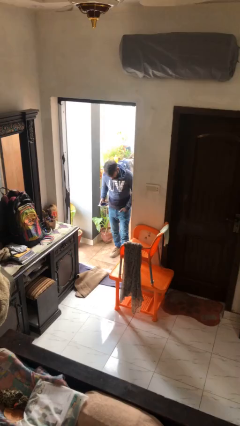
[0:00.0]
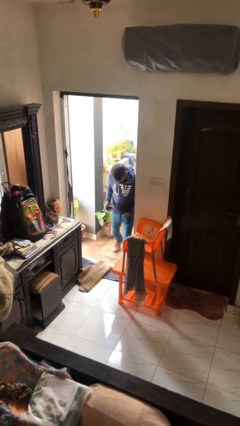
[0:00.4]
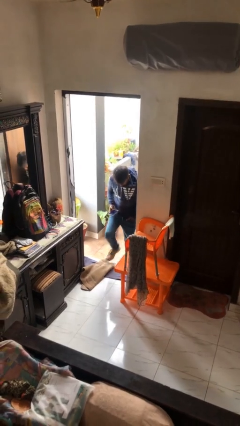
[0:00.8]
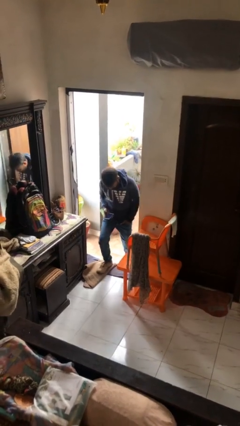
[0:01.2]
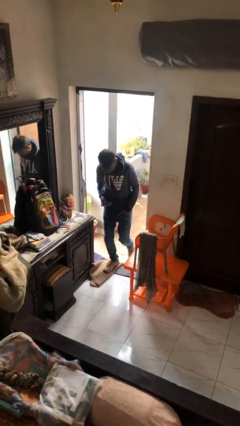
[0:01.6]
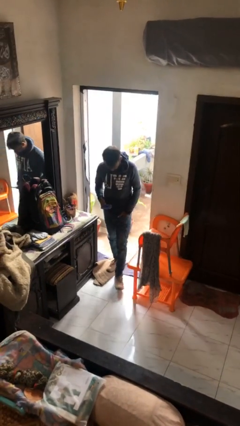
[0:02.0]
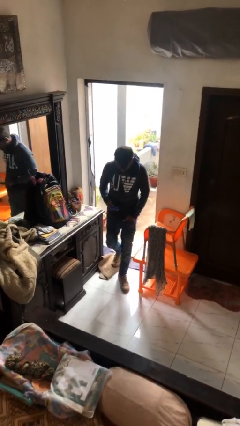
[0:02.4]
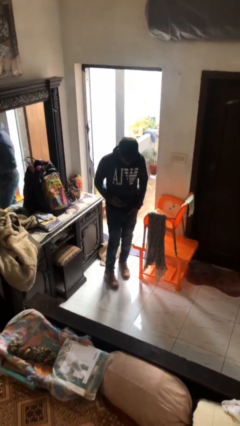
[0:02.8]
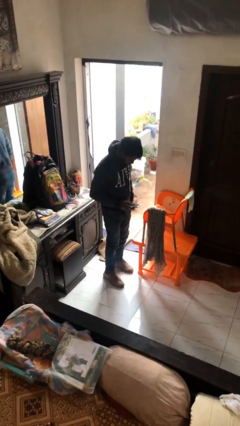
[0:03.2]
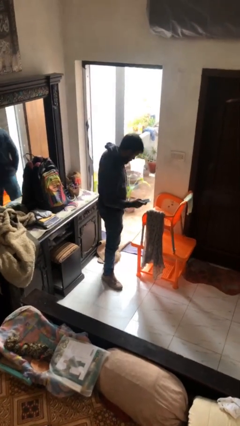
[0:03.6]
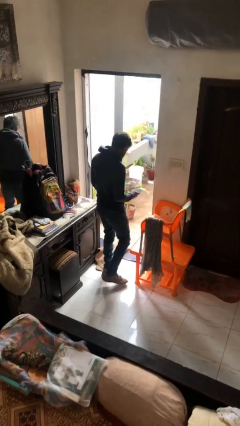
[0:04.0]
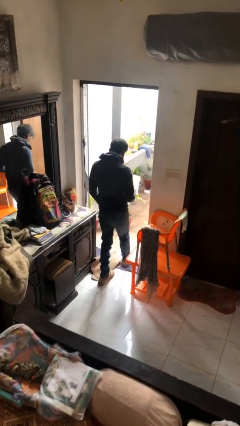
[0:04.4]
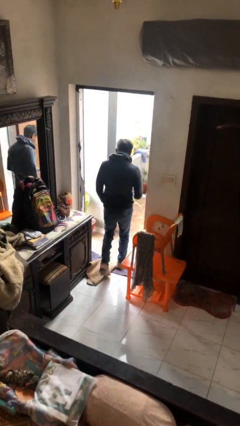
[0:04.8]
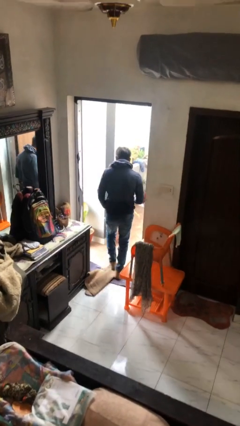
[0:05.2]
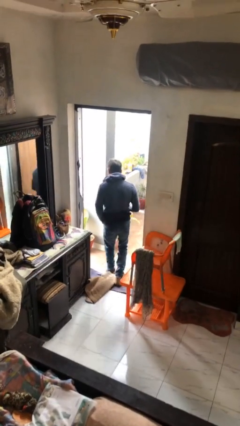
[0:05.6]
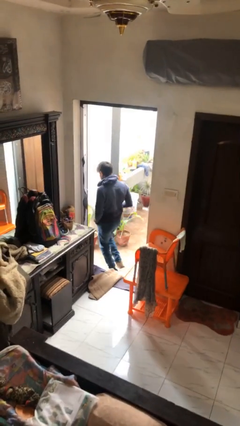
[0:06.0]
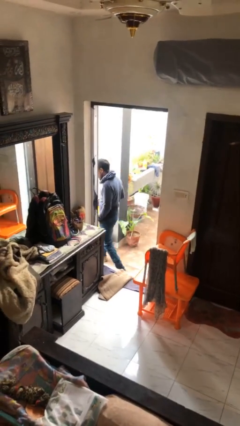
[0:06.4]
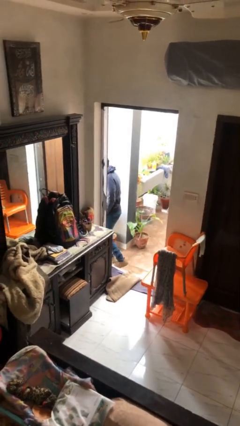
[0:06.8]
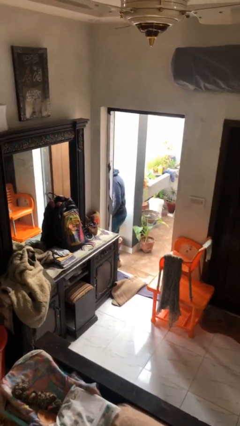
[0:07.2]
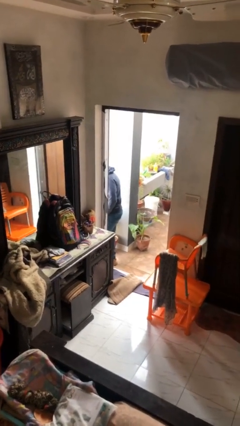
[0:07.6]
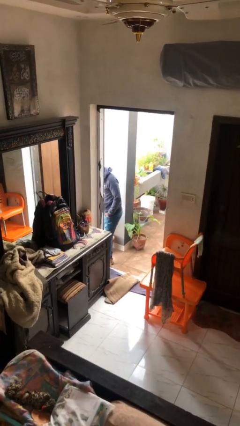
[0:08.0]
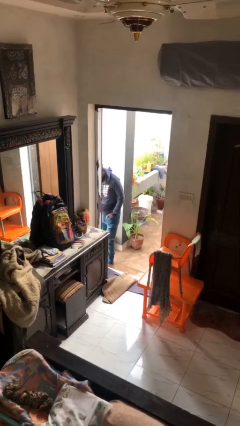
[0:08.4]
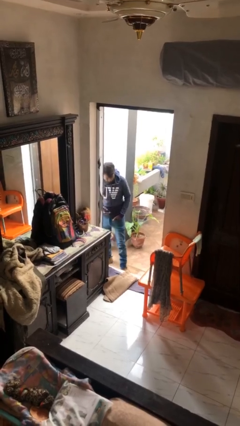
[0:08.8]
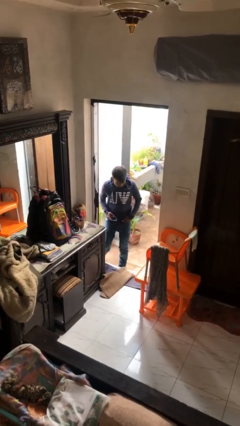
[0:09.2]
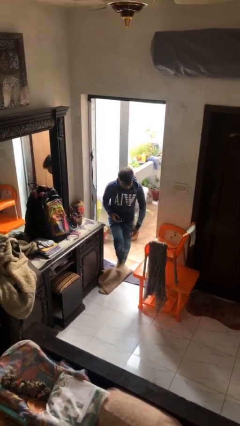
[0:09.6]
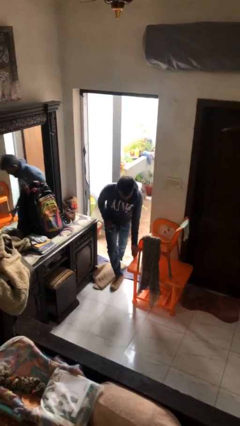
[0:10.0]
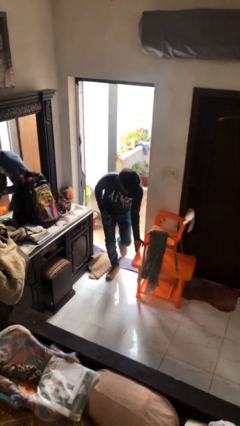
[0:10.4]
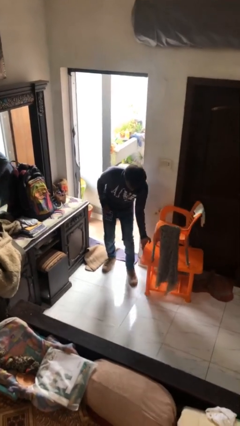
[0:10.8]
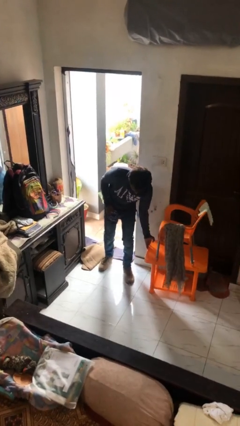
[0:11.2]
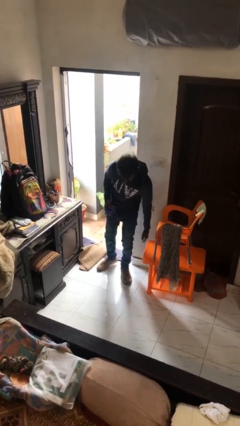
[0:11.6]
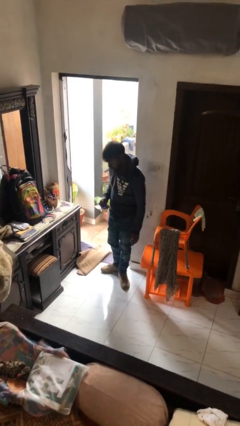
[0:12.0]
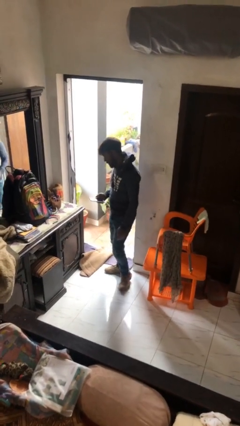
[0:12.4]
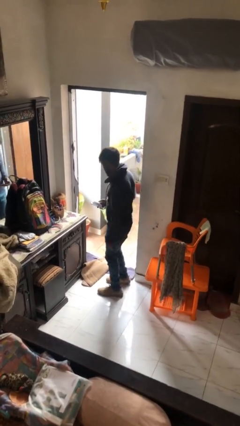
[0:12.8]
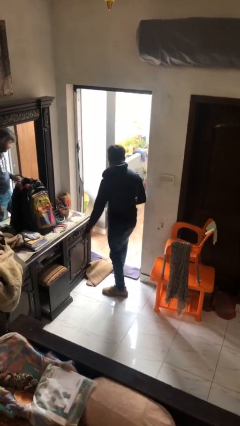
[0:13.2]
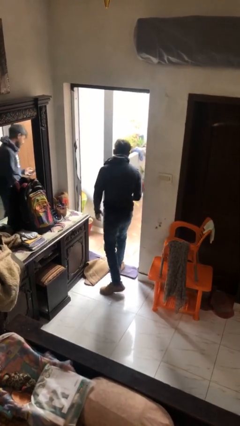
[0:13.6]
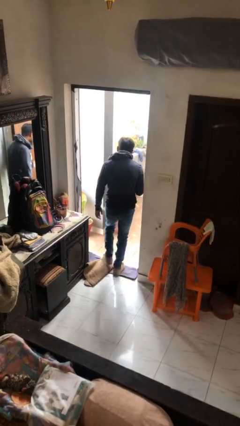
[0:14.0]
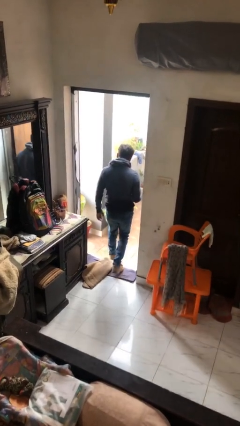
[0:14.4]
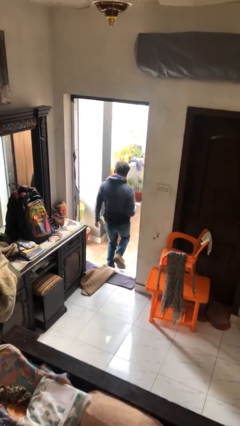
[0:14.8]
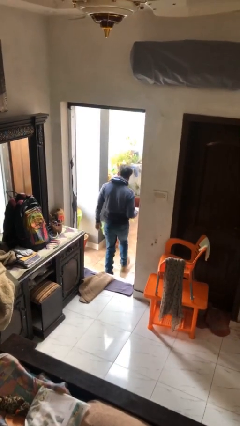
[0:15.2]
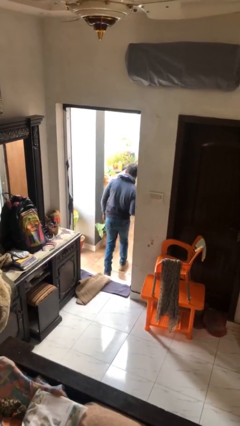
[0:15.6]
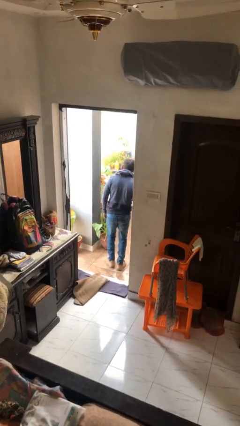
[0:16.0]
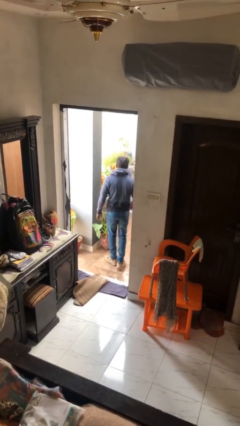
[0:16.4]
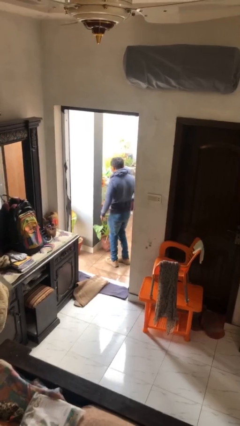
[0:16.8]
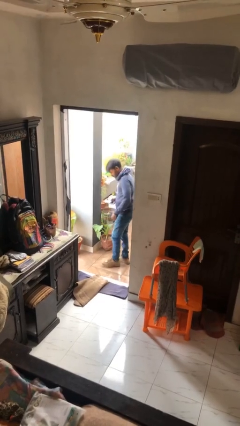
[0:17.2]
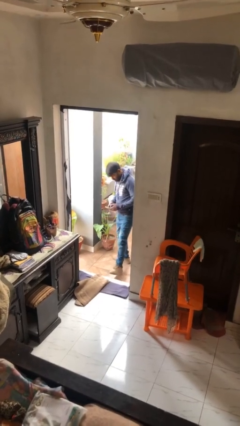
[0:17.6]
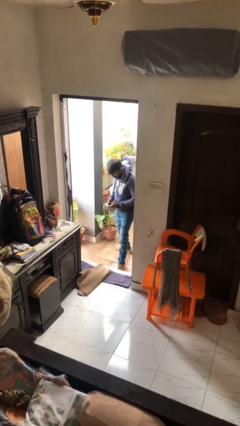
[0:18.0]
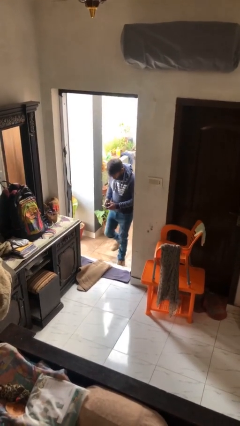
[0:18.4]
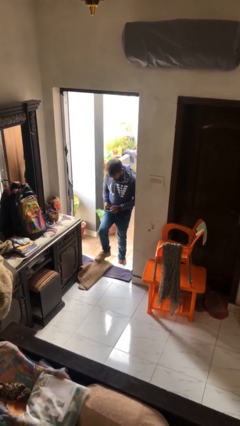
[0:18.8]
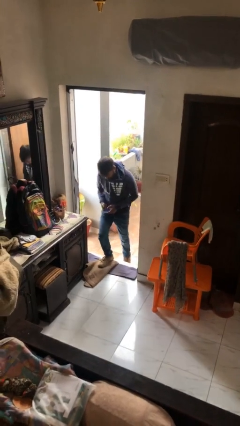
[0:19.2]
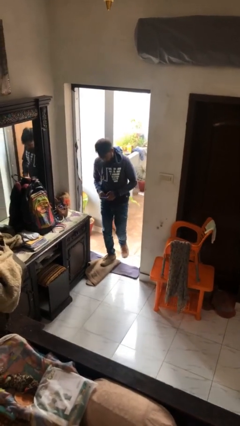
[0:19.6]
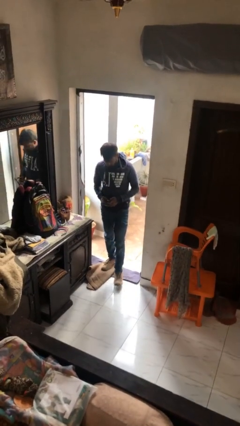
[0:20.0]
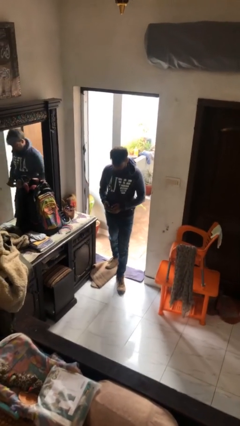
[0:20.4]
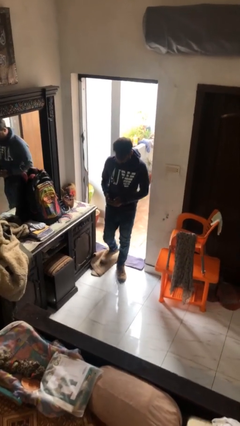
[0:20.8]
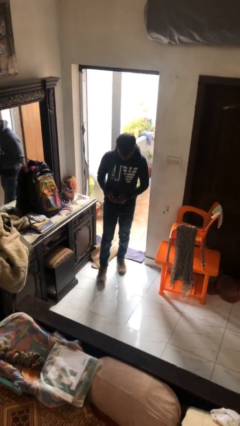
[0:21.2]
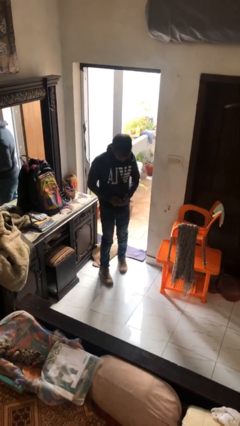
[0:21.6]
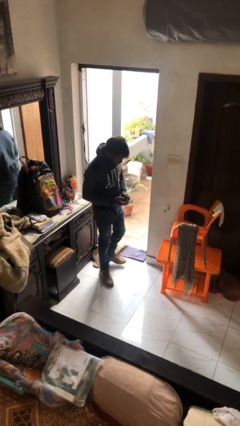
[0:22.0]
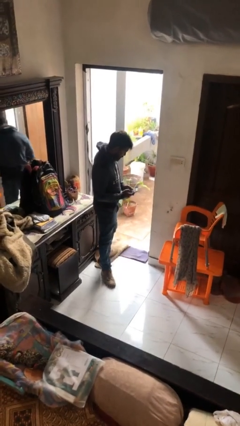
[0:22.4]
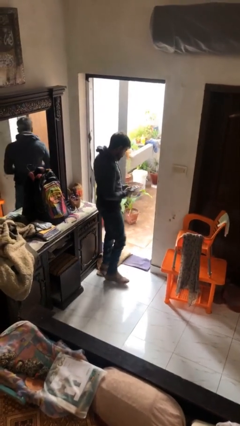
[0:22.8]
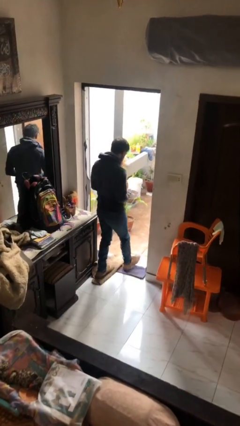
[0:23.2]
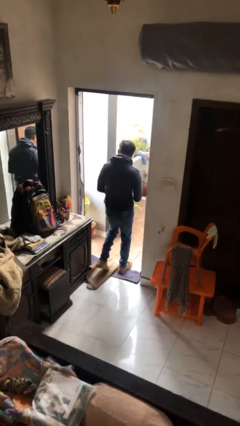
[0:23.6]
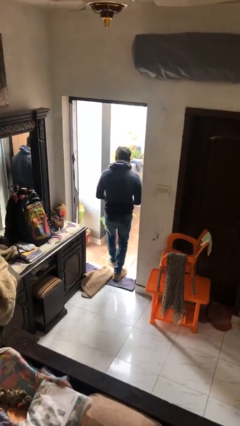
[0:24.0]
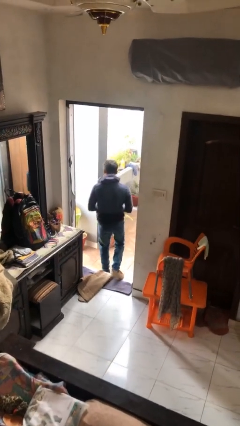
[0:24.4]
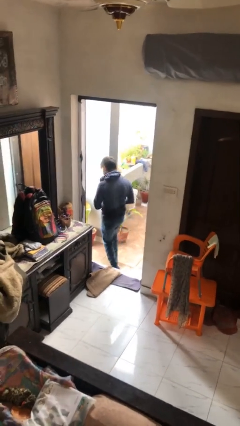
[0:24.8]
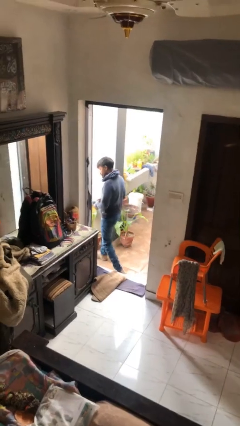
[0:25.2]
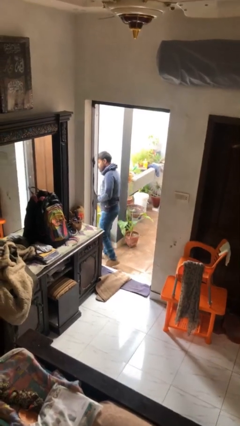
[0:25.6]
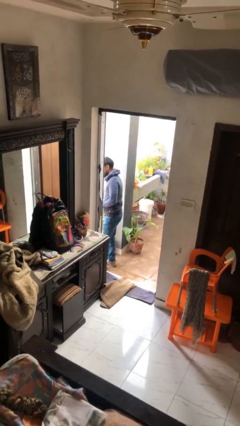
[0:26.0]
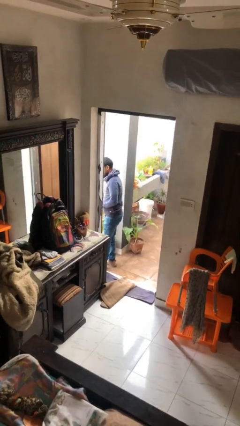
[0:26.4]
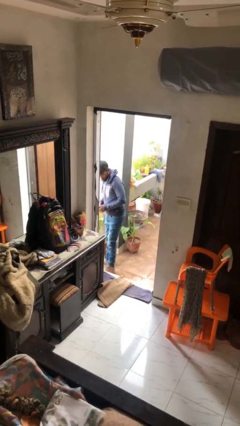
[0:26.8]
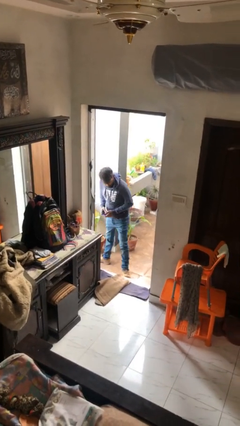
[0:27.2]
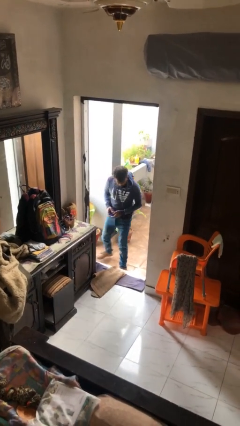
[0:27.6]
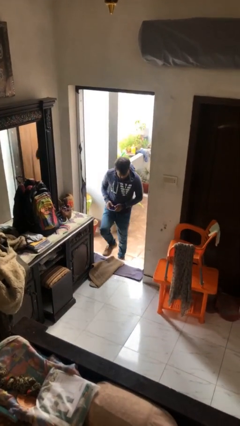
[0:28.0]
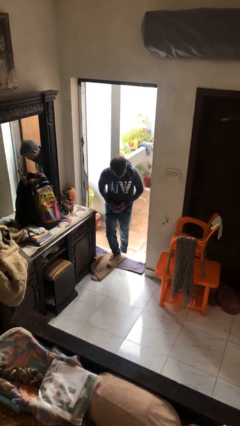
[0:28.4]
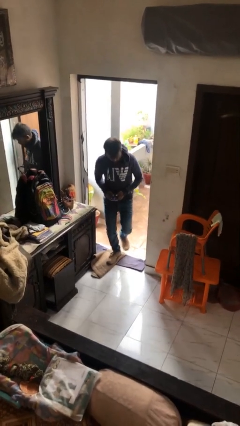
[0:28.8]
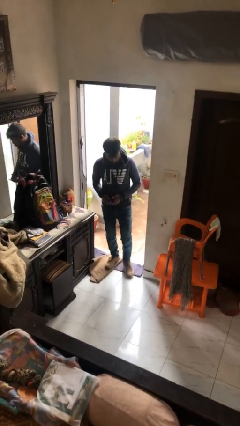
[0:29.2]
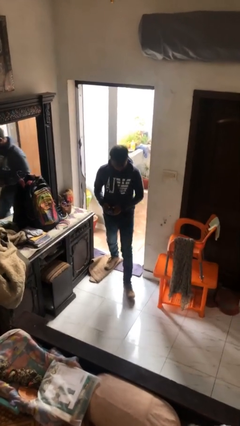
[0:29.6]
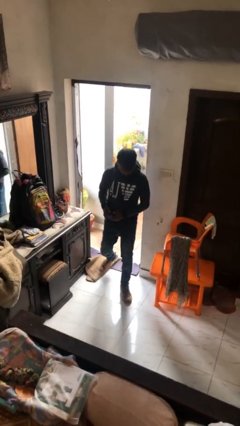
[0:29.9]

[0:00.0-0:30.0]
person texts on phone

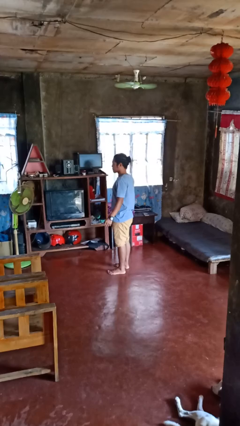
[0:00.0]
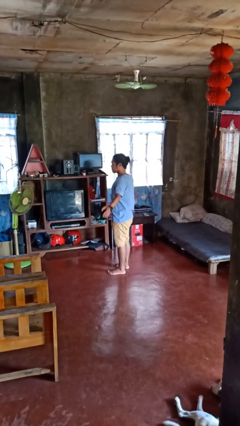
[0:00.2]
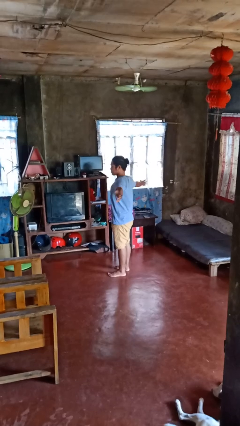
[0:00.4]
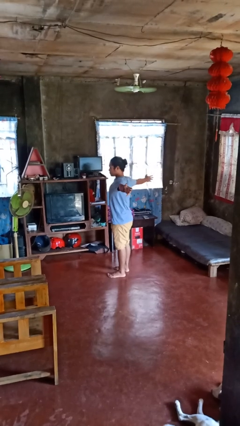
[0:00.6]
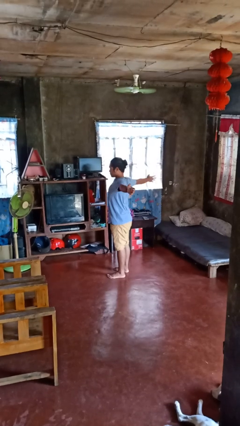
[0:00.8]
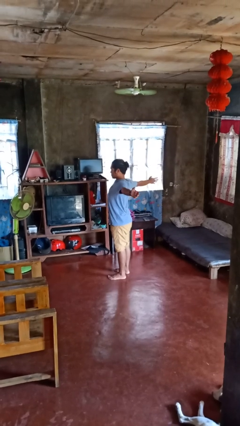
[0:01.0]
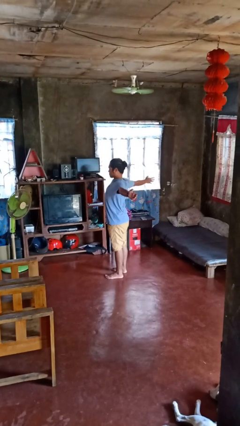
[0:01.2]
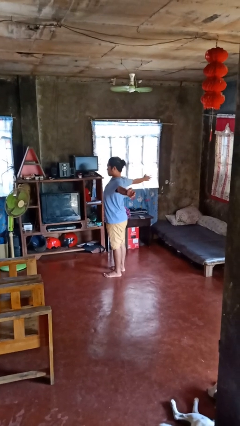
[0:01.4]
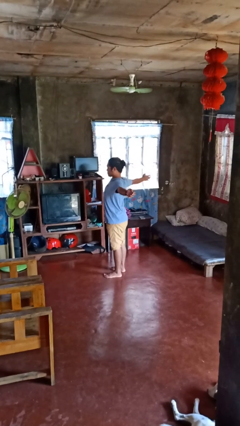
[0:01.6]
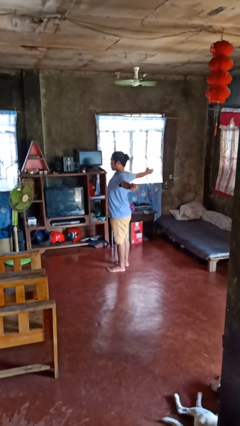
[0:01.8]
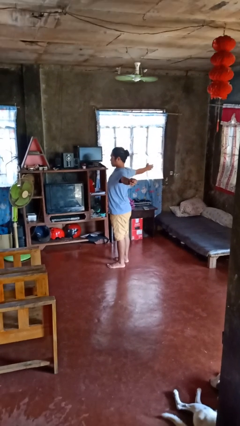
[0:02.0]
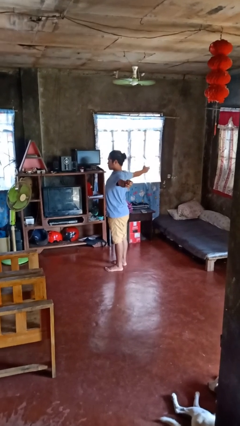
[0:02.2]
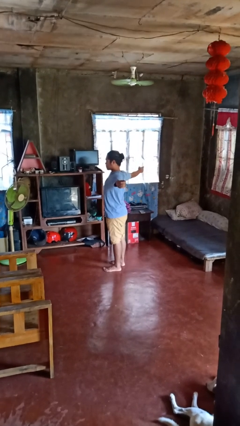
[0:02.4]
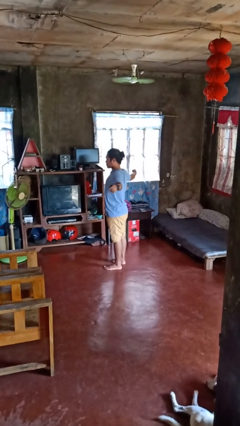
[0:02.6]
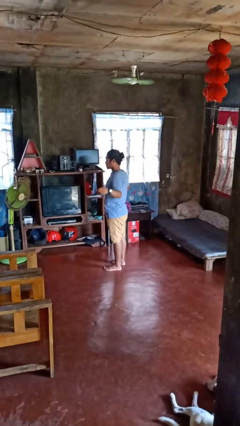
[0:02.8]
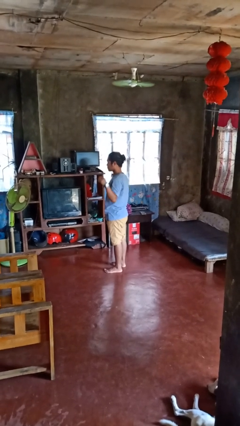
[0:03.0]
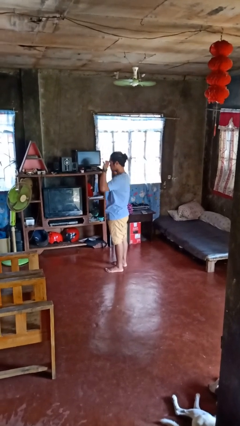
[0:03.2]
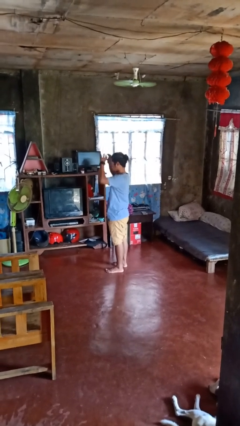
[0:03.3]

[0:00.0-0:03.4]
person stretches arms to side
